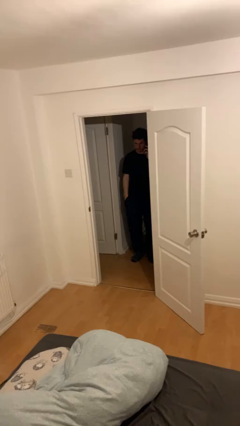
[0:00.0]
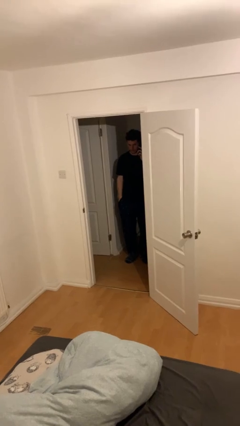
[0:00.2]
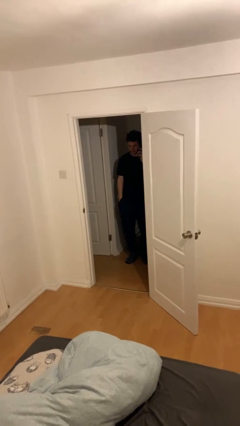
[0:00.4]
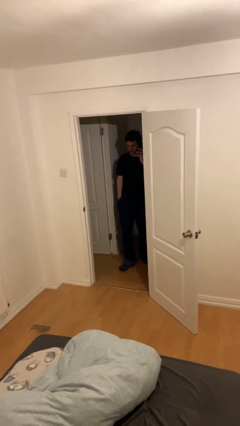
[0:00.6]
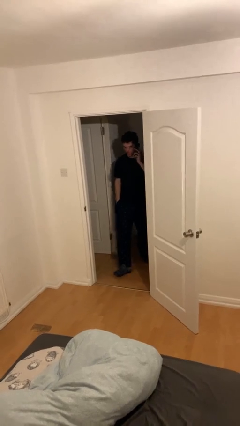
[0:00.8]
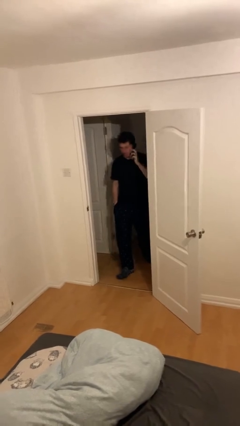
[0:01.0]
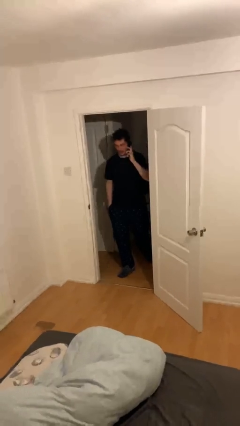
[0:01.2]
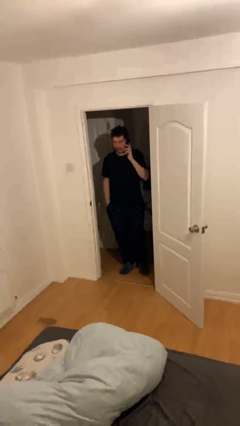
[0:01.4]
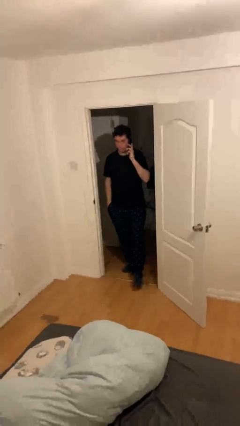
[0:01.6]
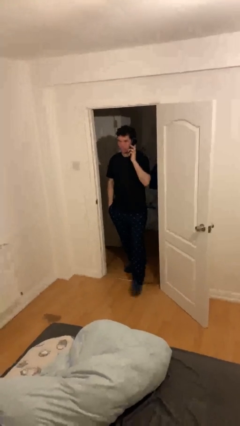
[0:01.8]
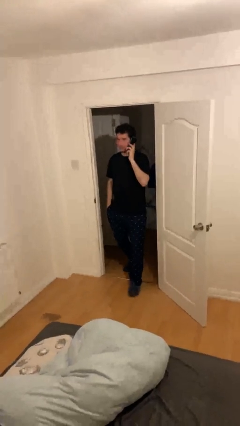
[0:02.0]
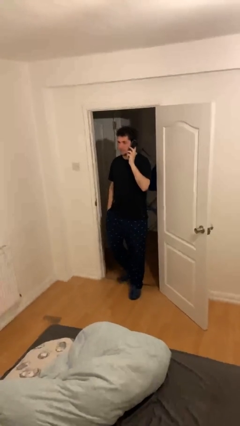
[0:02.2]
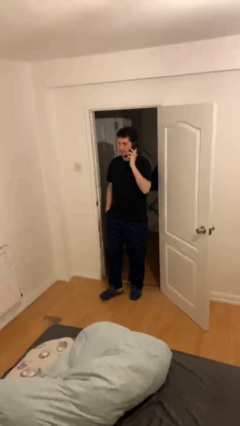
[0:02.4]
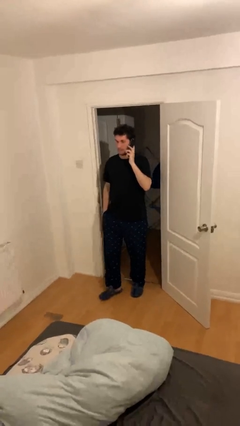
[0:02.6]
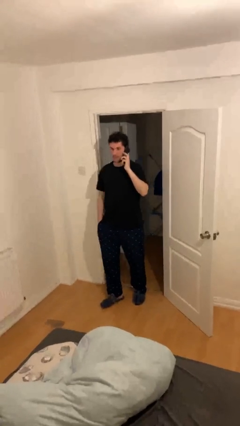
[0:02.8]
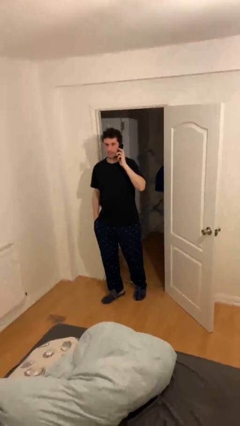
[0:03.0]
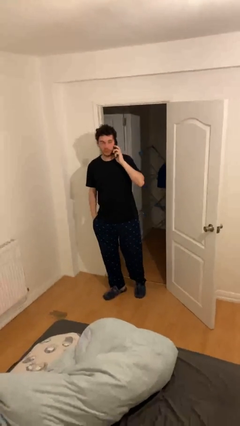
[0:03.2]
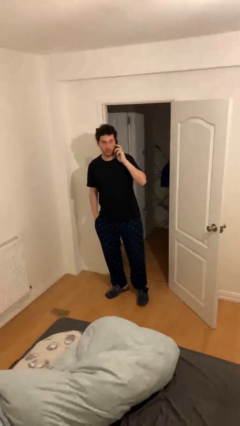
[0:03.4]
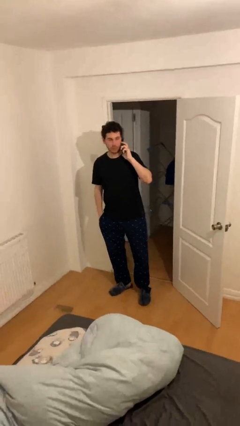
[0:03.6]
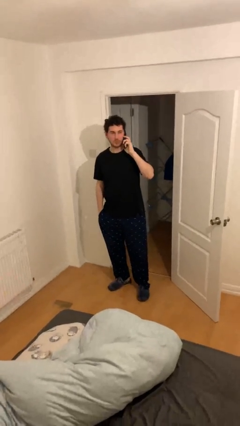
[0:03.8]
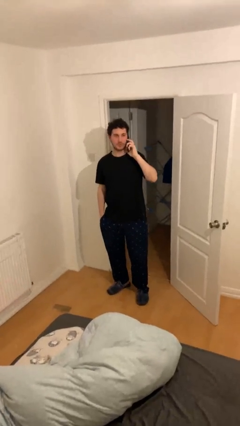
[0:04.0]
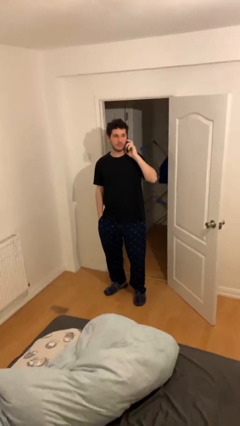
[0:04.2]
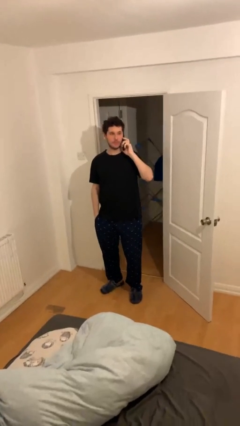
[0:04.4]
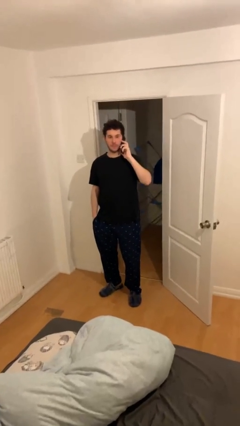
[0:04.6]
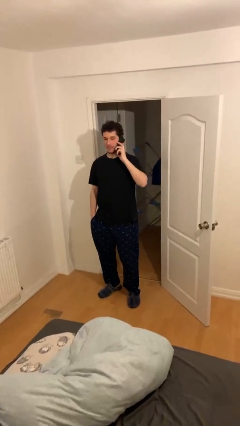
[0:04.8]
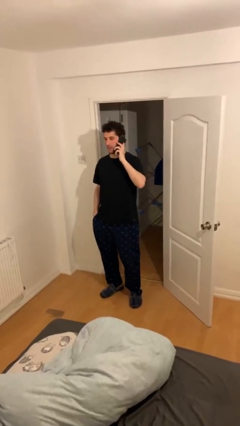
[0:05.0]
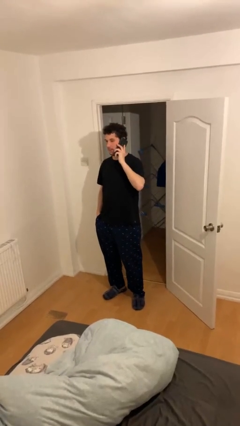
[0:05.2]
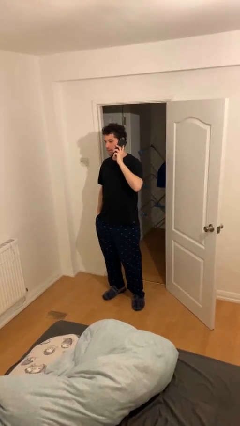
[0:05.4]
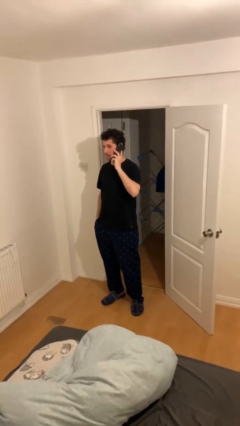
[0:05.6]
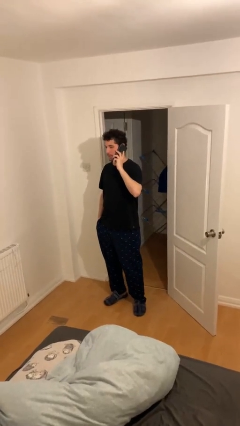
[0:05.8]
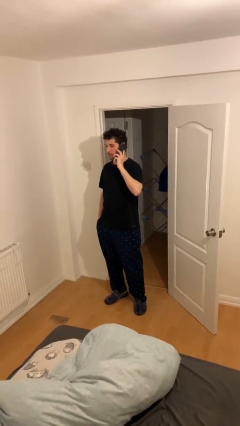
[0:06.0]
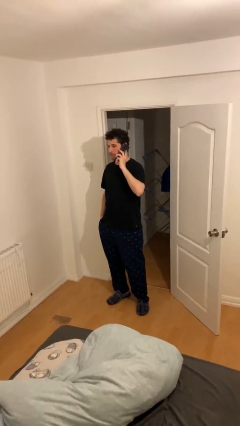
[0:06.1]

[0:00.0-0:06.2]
person enters scene through structure

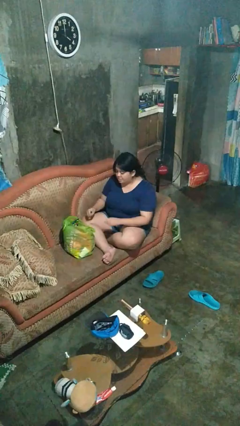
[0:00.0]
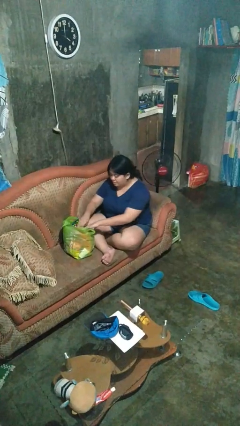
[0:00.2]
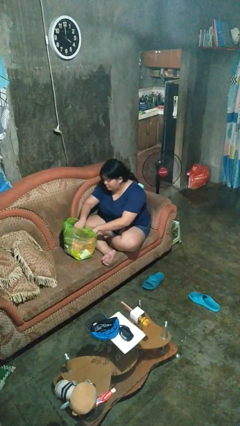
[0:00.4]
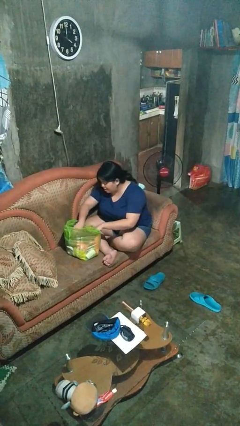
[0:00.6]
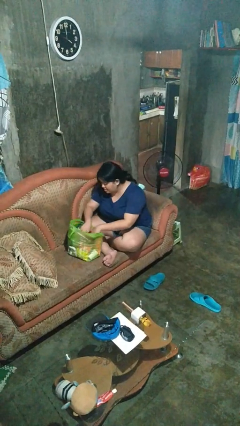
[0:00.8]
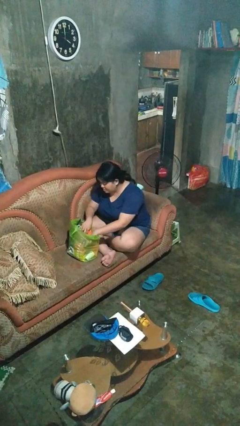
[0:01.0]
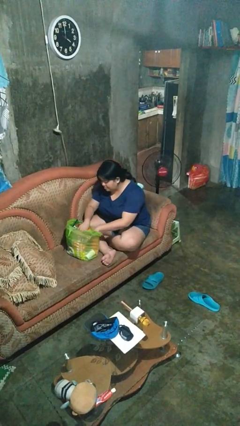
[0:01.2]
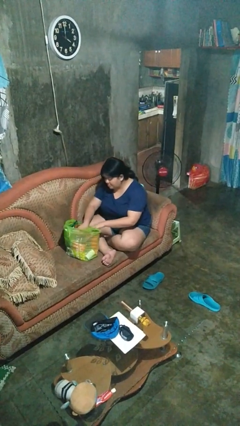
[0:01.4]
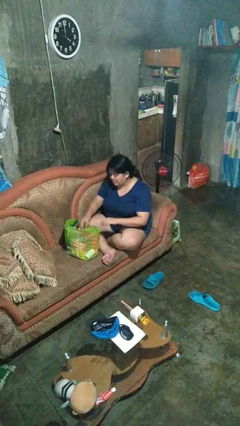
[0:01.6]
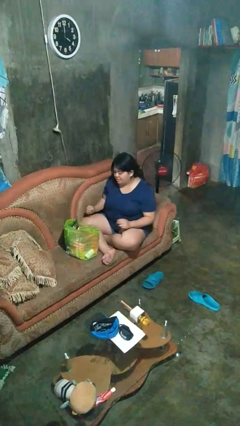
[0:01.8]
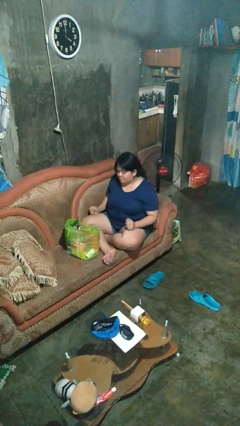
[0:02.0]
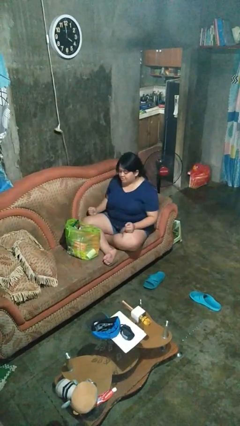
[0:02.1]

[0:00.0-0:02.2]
person searches in bag

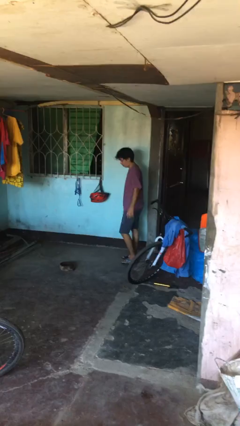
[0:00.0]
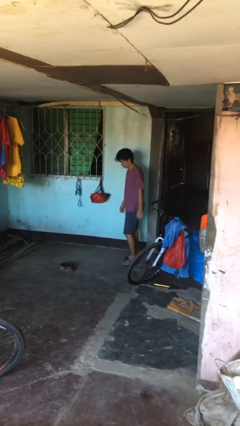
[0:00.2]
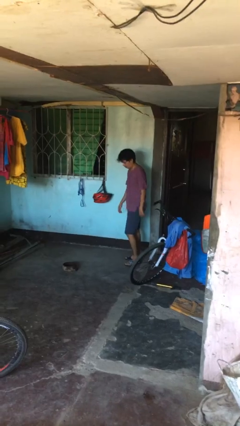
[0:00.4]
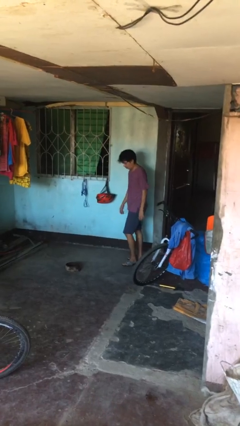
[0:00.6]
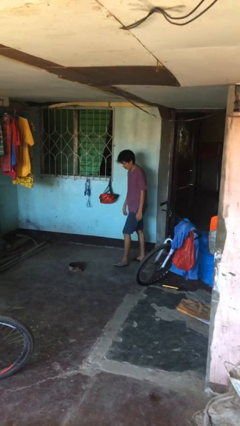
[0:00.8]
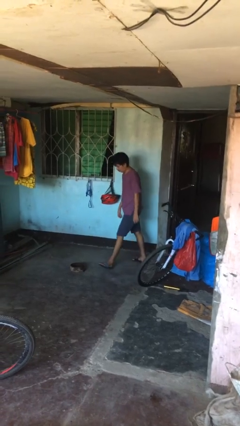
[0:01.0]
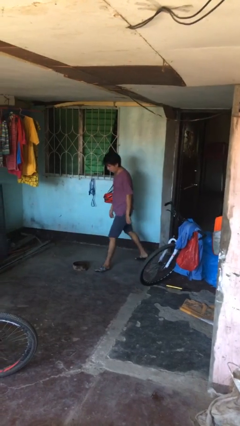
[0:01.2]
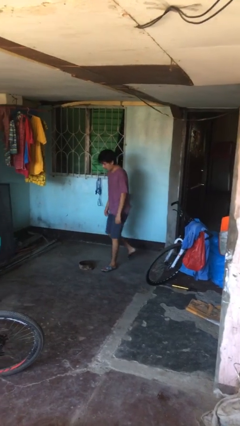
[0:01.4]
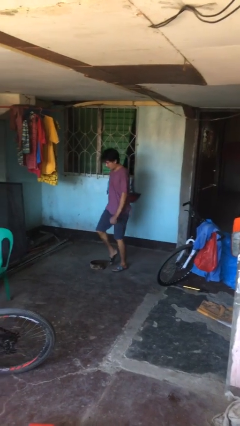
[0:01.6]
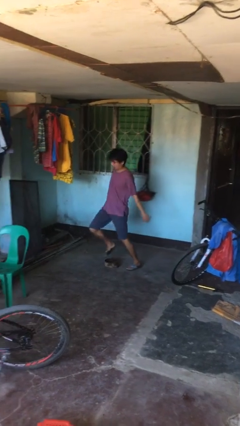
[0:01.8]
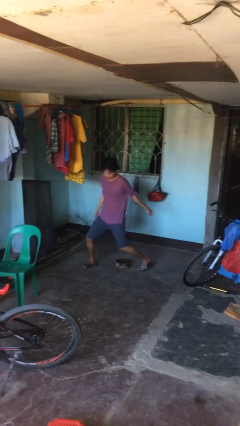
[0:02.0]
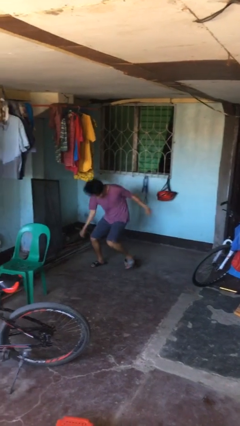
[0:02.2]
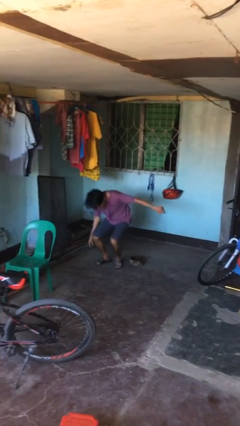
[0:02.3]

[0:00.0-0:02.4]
person trips on object on floor

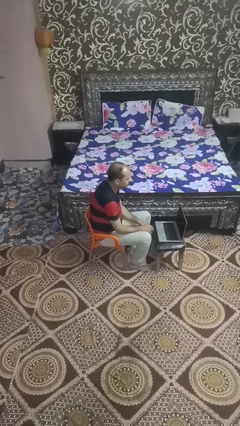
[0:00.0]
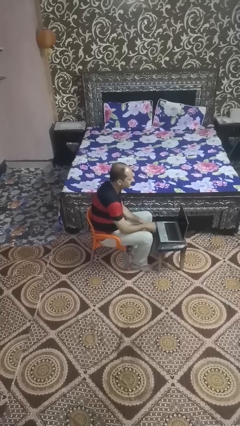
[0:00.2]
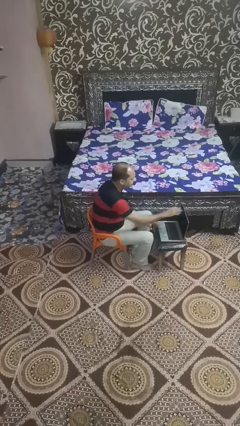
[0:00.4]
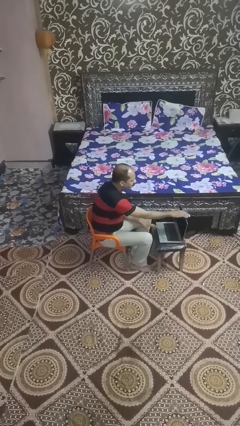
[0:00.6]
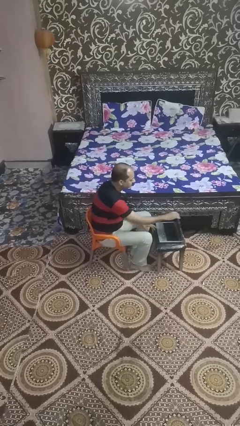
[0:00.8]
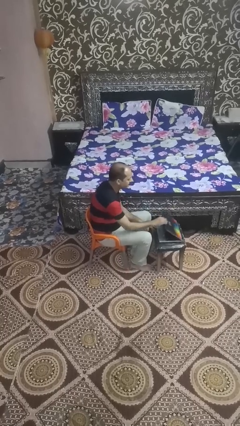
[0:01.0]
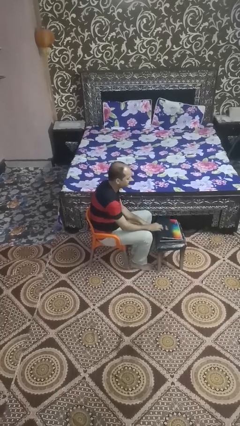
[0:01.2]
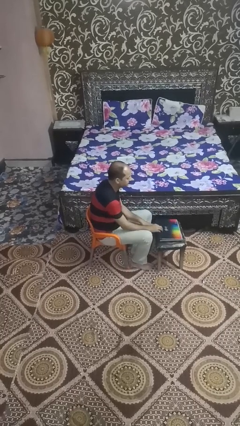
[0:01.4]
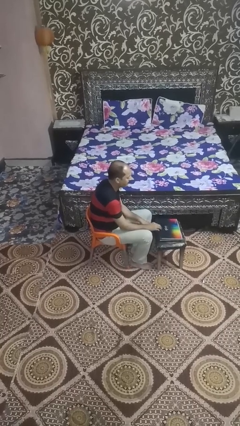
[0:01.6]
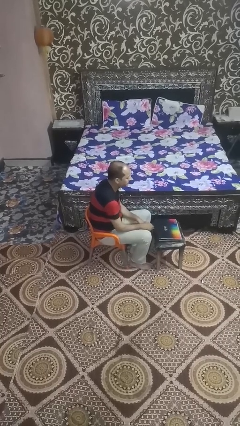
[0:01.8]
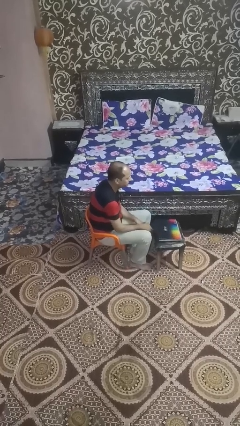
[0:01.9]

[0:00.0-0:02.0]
person closes laptop

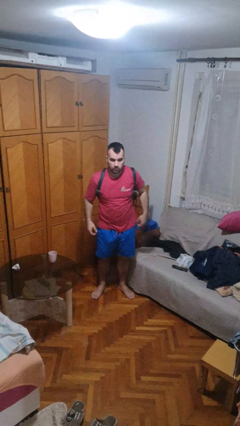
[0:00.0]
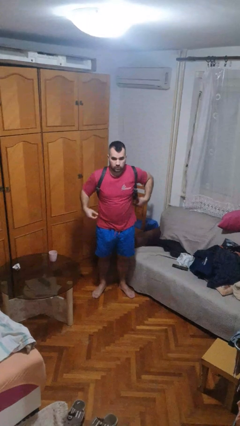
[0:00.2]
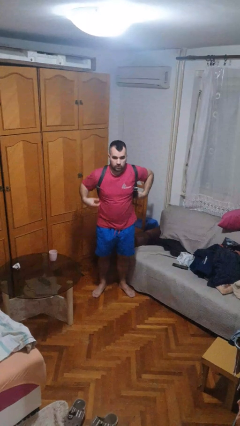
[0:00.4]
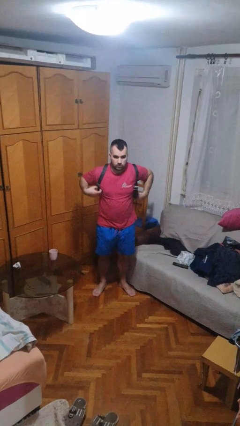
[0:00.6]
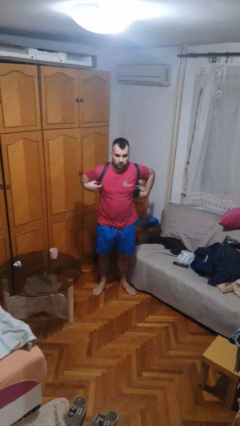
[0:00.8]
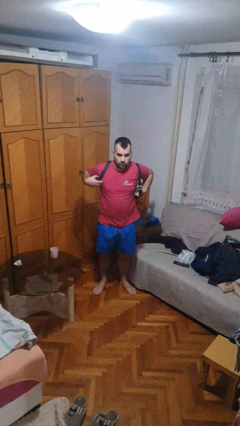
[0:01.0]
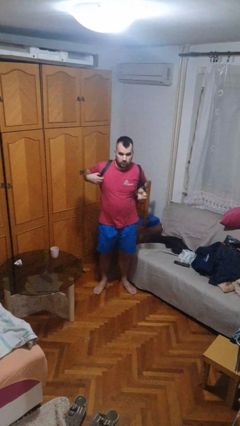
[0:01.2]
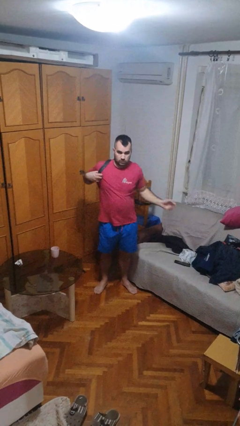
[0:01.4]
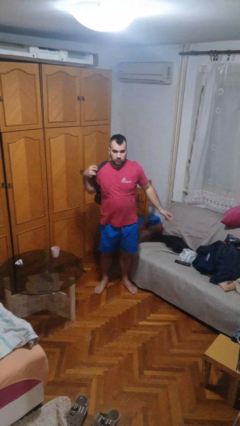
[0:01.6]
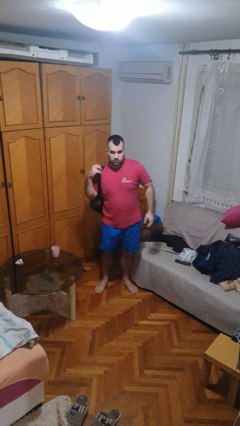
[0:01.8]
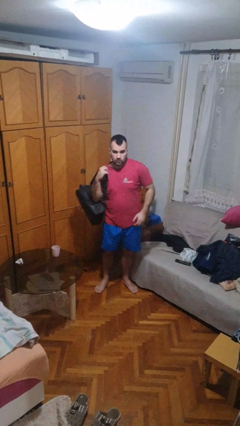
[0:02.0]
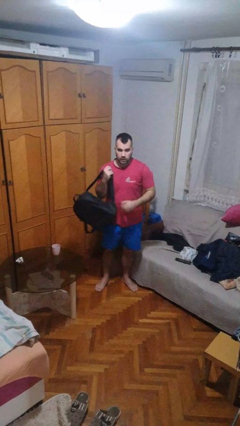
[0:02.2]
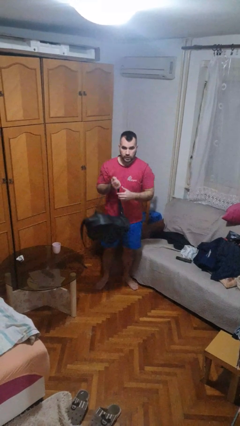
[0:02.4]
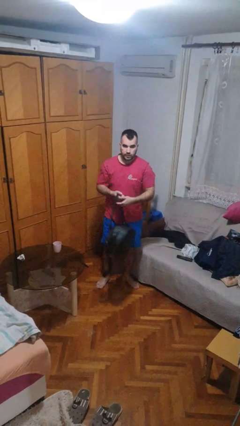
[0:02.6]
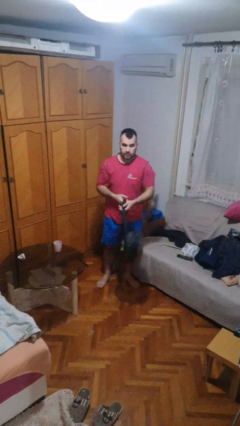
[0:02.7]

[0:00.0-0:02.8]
person takes off backpack

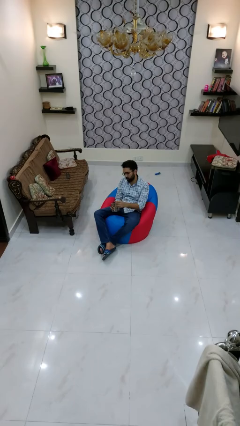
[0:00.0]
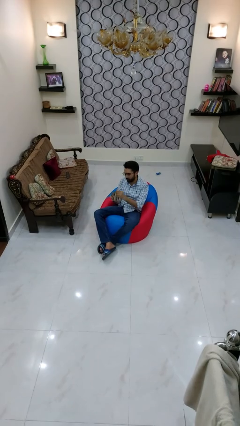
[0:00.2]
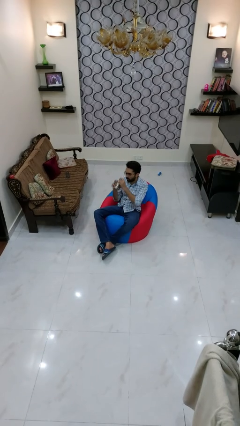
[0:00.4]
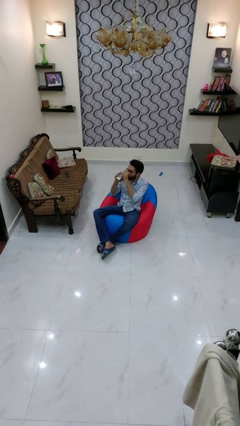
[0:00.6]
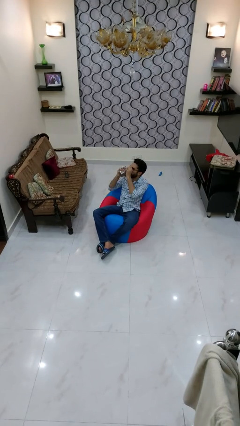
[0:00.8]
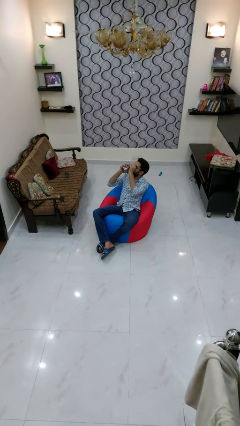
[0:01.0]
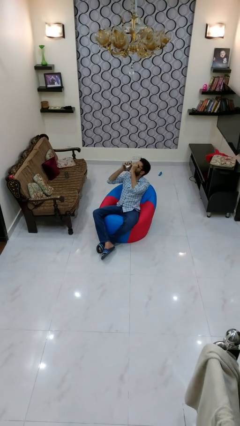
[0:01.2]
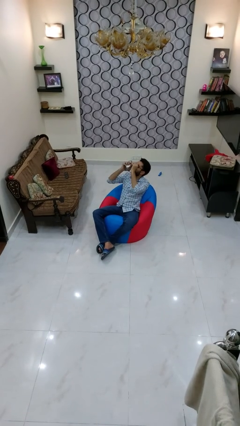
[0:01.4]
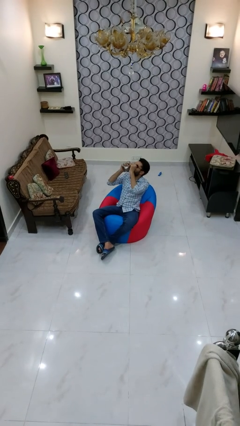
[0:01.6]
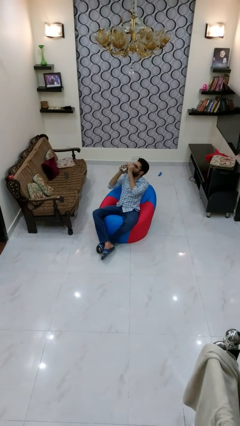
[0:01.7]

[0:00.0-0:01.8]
person drinks from mug
